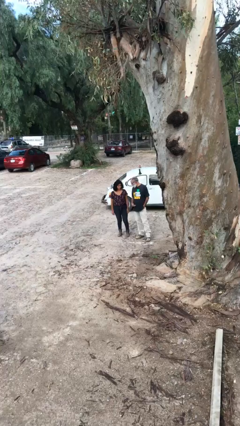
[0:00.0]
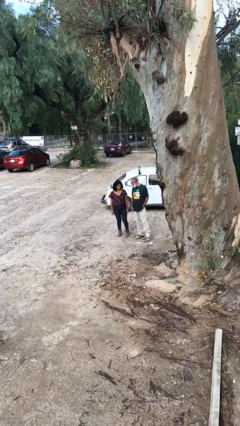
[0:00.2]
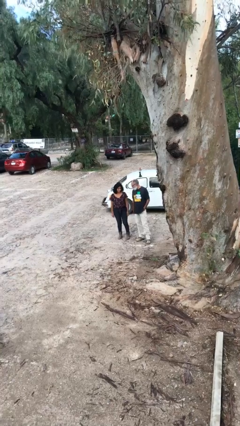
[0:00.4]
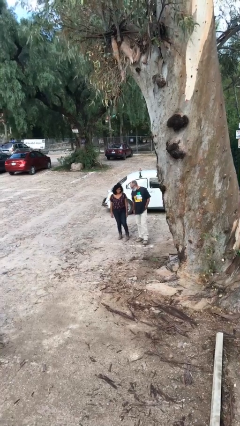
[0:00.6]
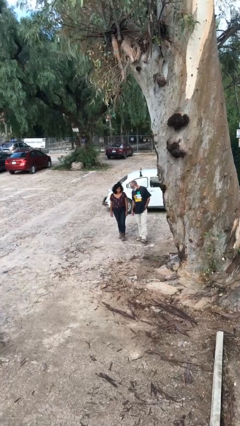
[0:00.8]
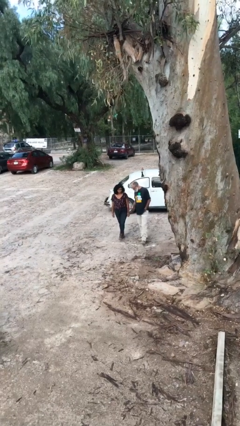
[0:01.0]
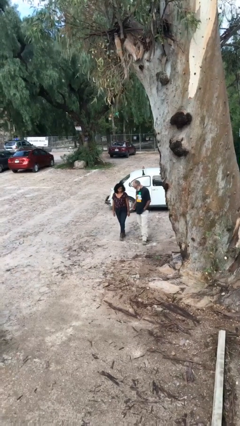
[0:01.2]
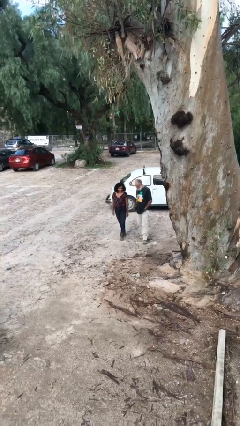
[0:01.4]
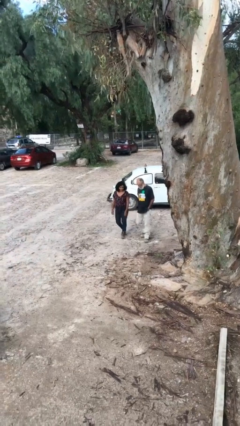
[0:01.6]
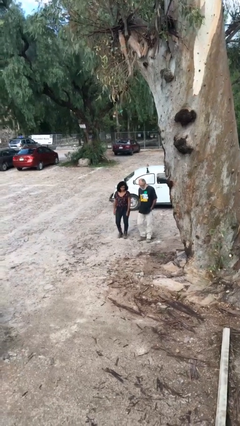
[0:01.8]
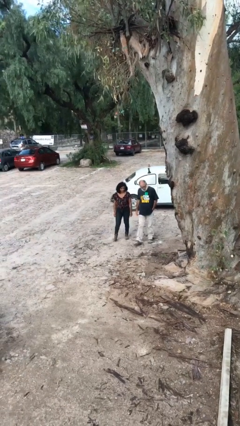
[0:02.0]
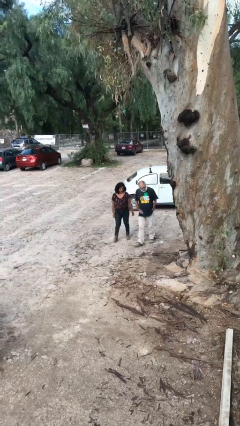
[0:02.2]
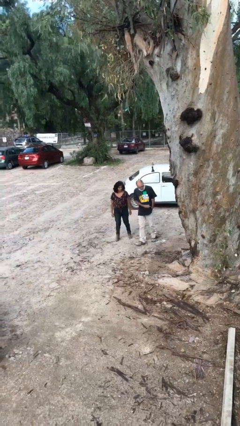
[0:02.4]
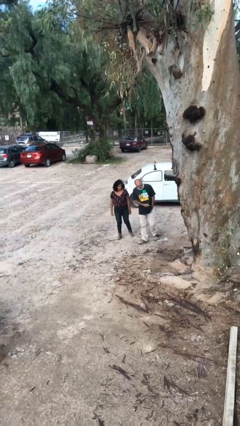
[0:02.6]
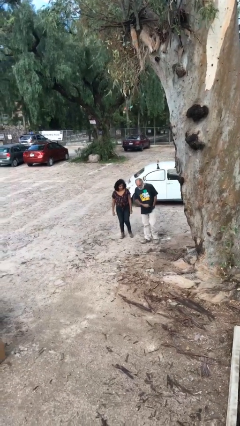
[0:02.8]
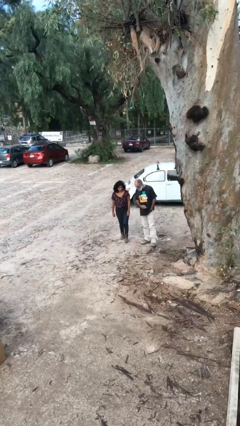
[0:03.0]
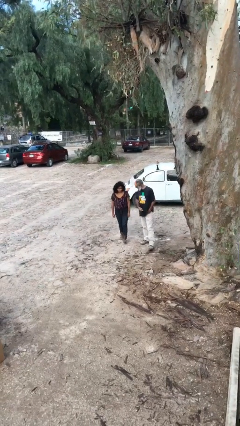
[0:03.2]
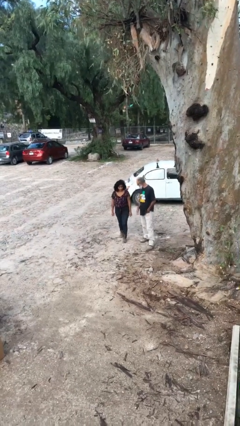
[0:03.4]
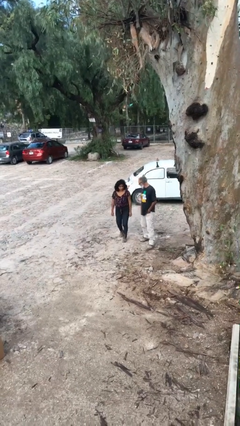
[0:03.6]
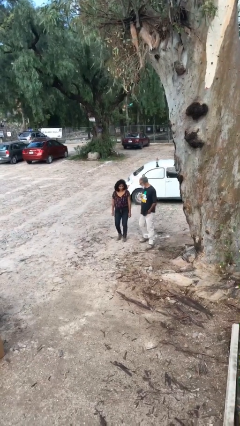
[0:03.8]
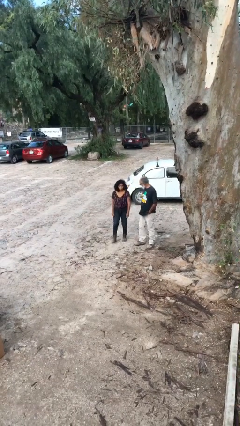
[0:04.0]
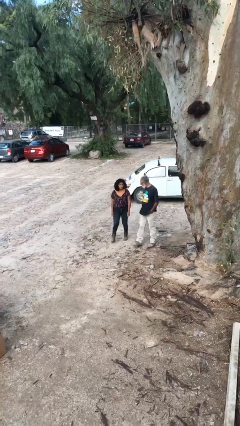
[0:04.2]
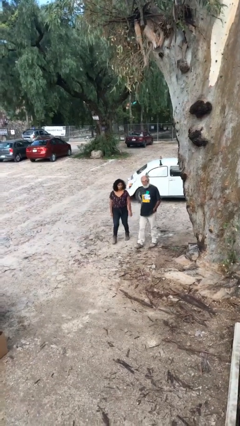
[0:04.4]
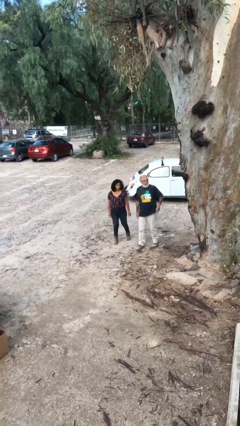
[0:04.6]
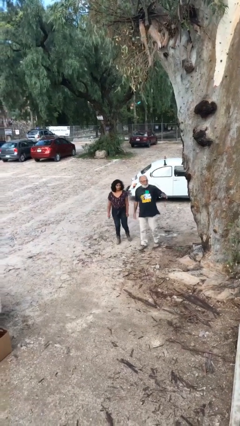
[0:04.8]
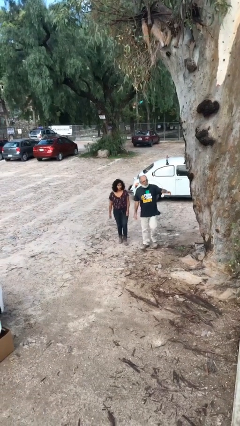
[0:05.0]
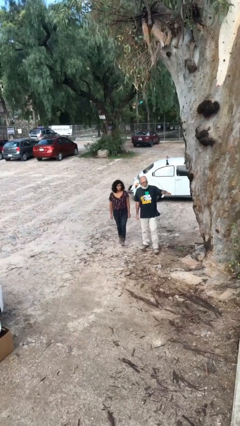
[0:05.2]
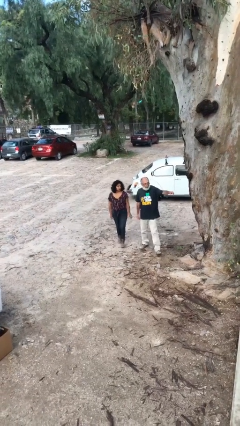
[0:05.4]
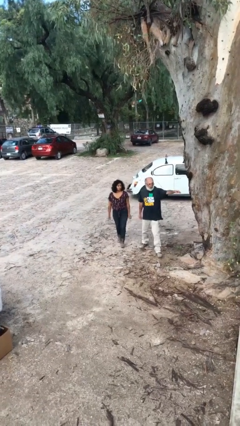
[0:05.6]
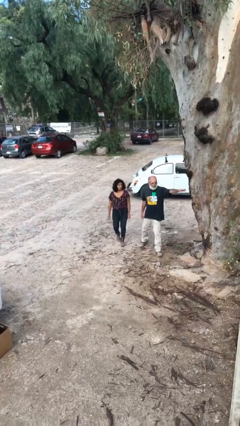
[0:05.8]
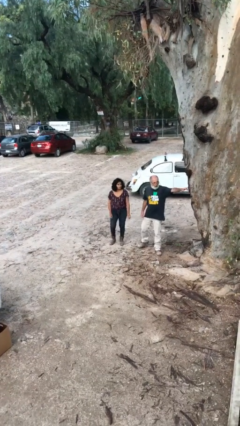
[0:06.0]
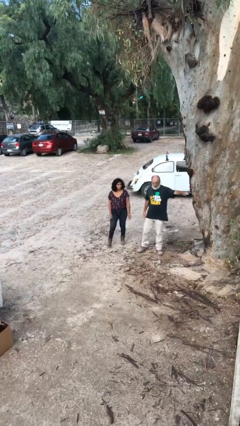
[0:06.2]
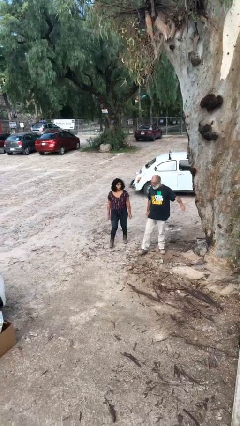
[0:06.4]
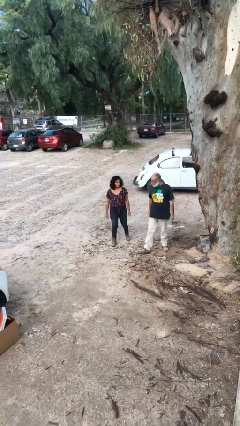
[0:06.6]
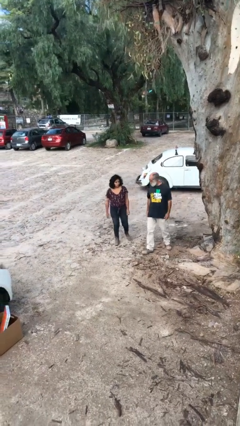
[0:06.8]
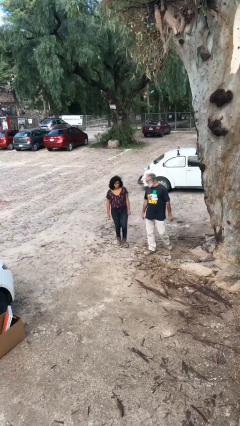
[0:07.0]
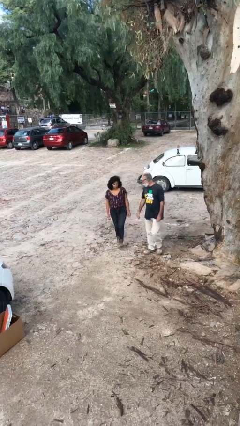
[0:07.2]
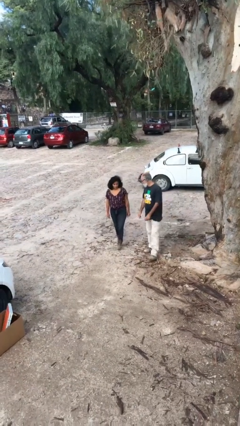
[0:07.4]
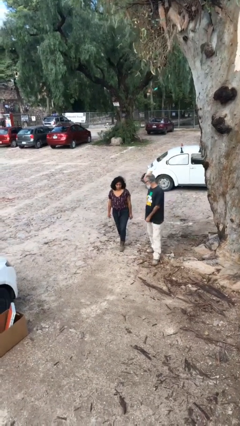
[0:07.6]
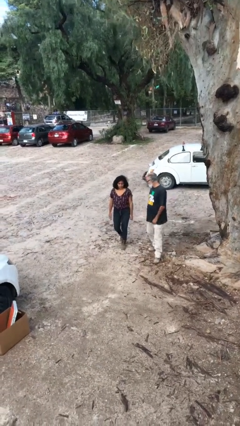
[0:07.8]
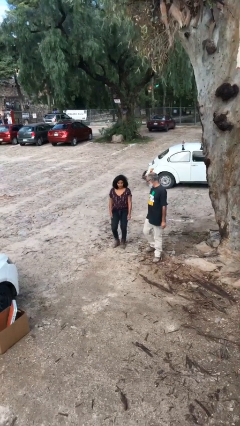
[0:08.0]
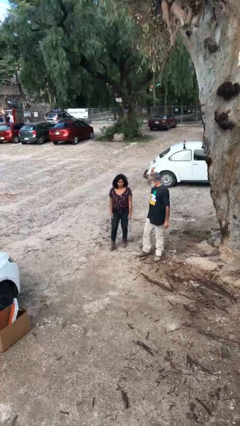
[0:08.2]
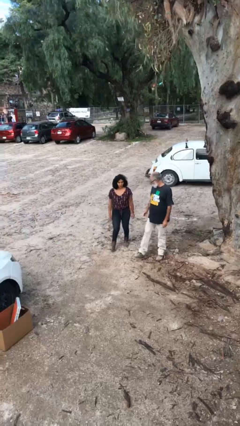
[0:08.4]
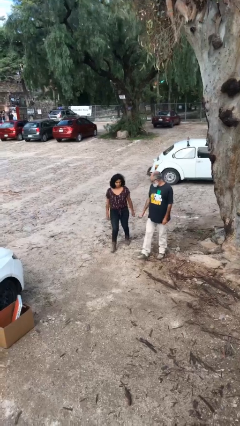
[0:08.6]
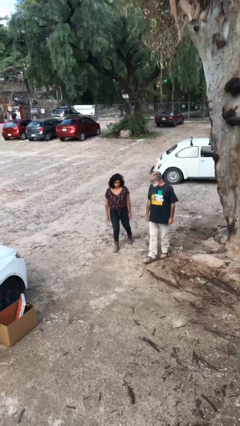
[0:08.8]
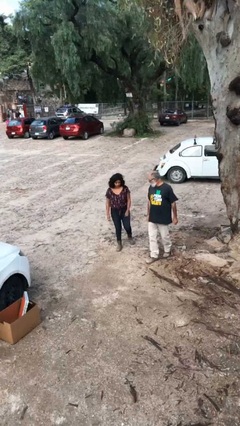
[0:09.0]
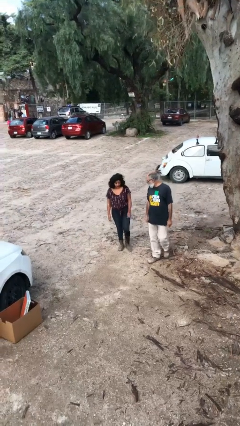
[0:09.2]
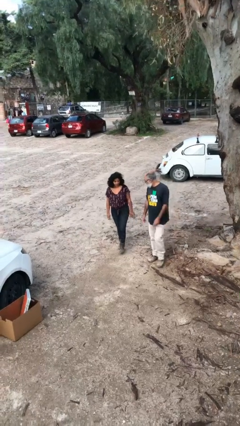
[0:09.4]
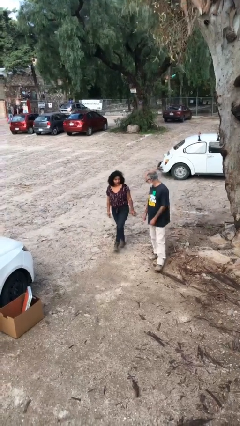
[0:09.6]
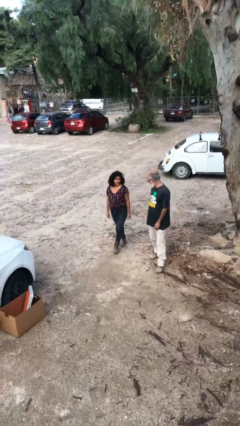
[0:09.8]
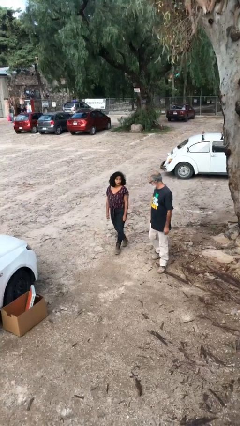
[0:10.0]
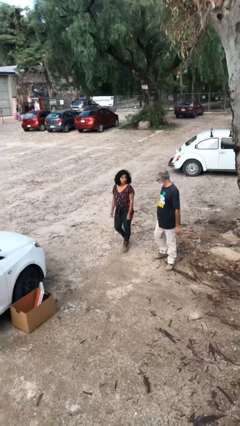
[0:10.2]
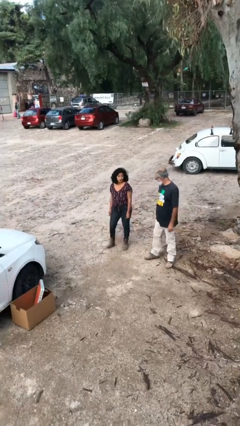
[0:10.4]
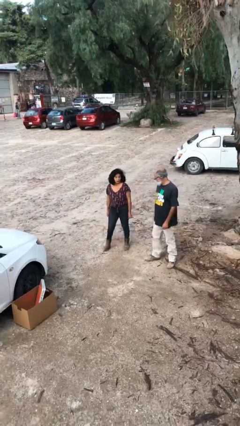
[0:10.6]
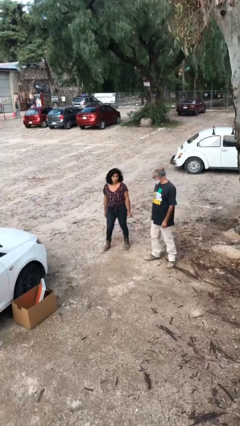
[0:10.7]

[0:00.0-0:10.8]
person talks to person

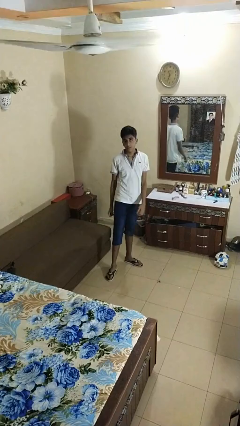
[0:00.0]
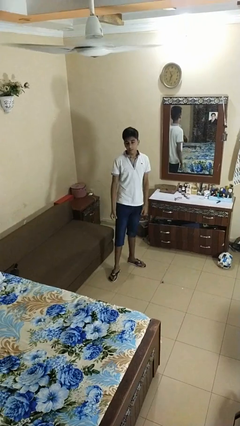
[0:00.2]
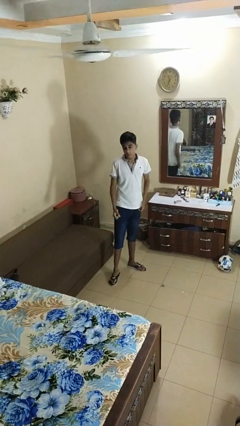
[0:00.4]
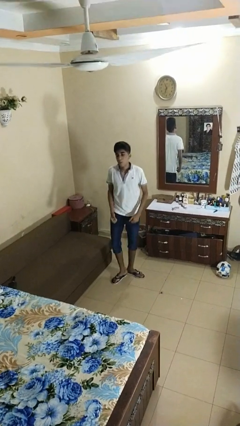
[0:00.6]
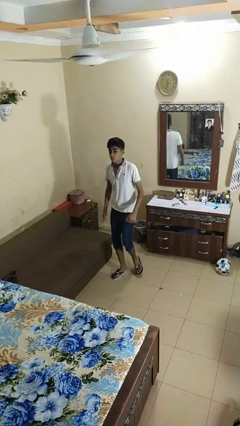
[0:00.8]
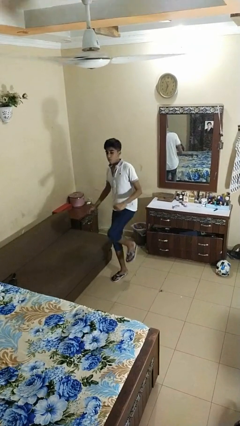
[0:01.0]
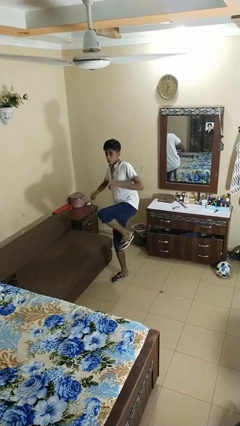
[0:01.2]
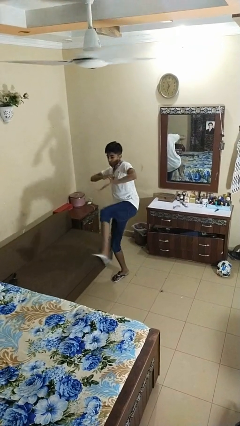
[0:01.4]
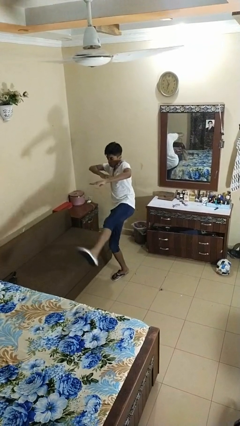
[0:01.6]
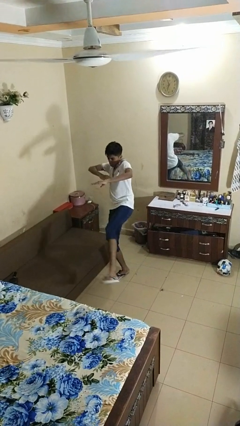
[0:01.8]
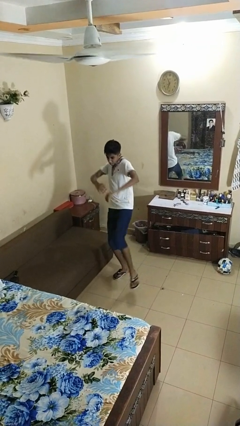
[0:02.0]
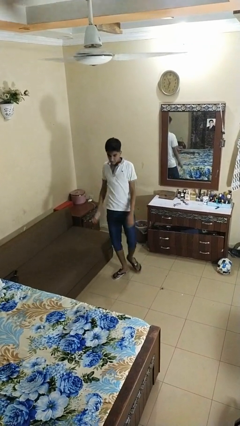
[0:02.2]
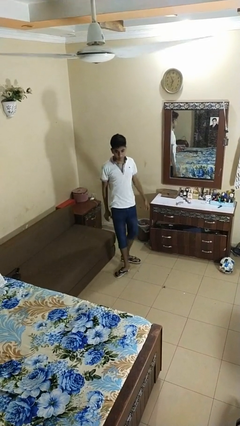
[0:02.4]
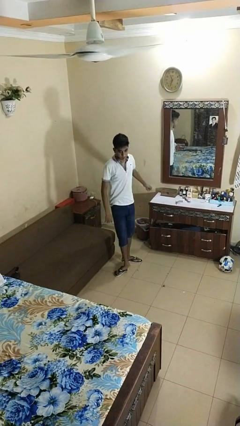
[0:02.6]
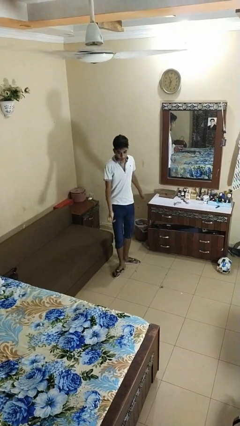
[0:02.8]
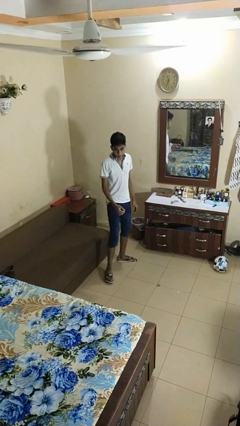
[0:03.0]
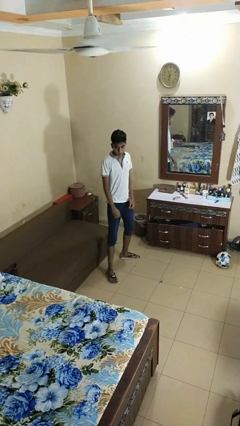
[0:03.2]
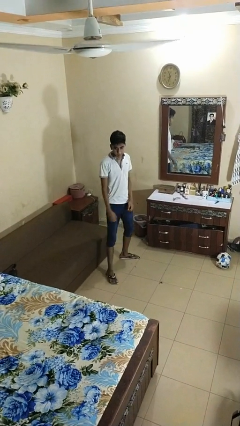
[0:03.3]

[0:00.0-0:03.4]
person karate kicks

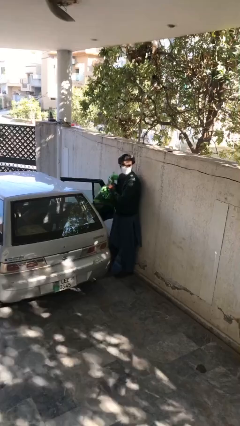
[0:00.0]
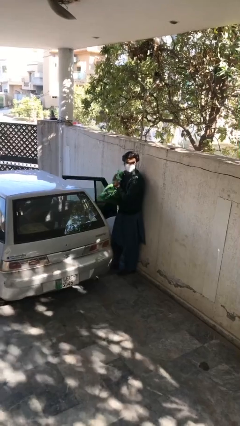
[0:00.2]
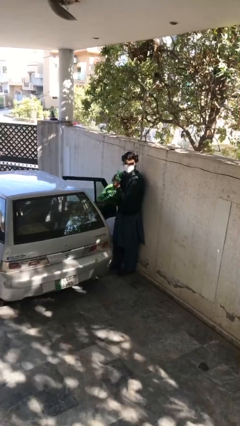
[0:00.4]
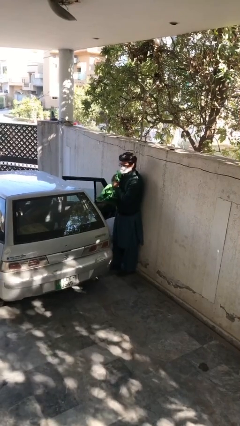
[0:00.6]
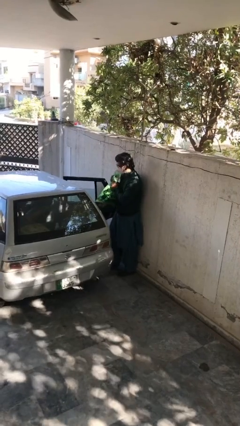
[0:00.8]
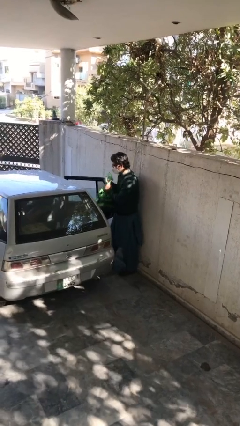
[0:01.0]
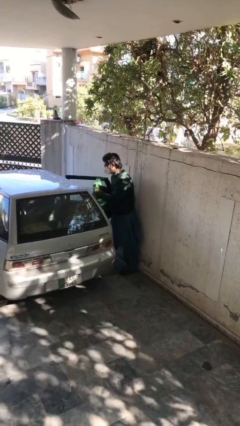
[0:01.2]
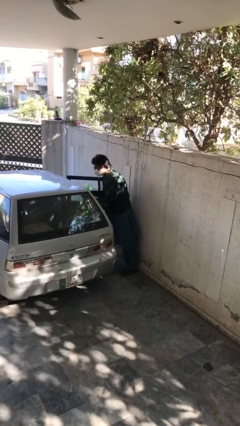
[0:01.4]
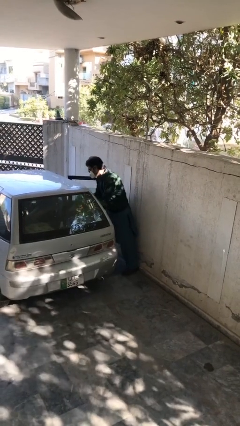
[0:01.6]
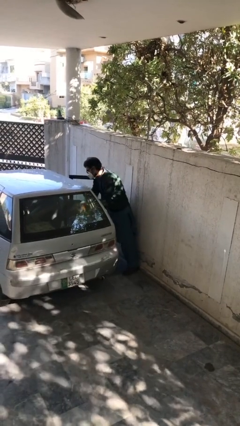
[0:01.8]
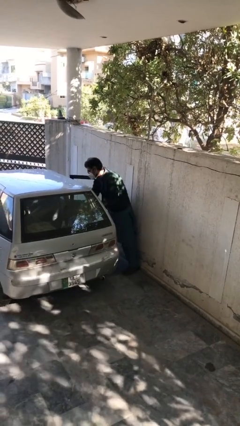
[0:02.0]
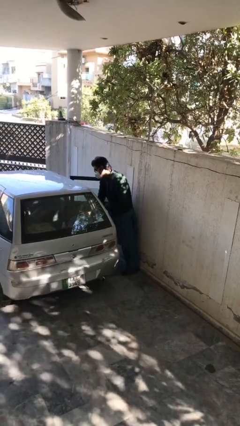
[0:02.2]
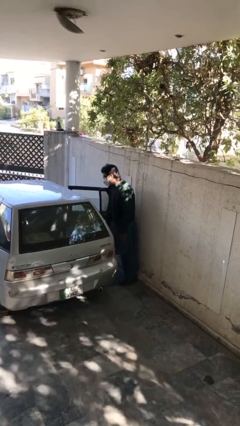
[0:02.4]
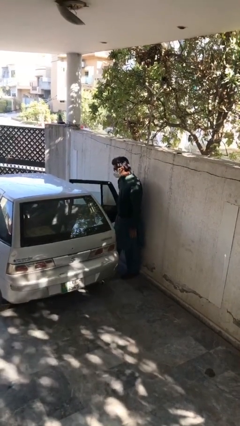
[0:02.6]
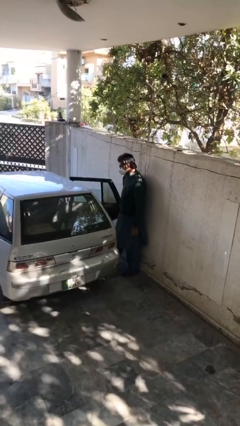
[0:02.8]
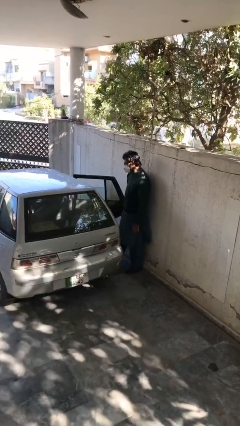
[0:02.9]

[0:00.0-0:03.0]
person loads car

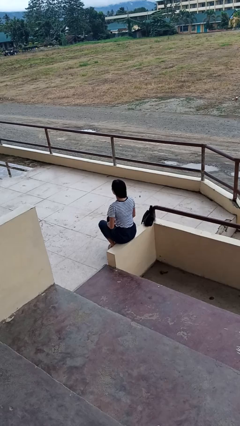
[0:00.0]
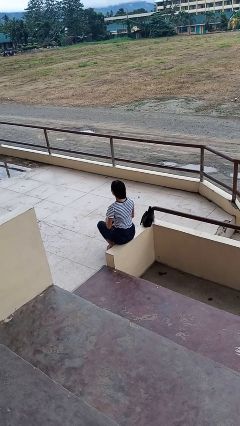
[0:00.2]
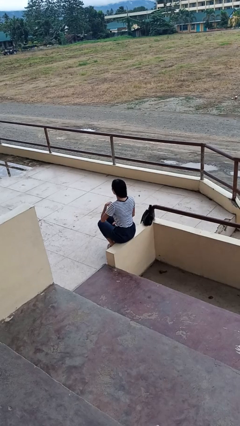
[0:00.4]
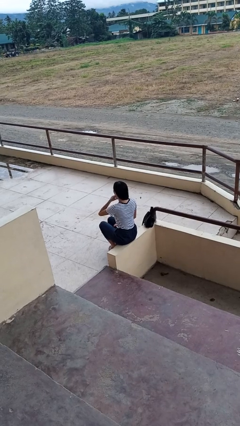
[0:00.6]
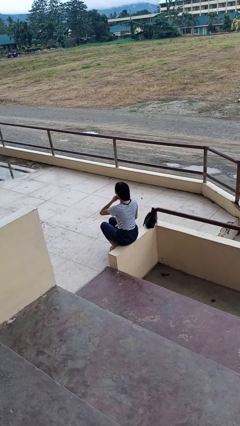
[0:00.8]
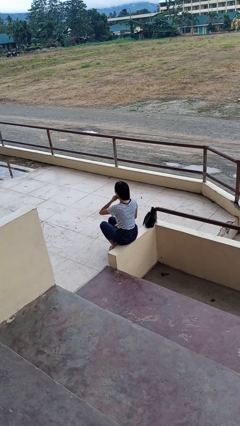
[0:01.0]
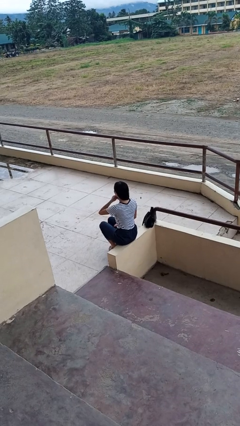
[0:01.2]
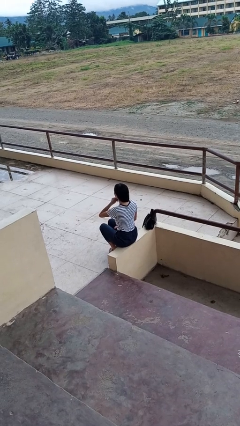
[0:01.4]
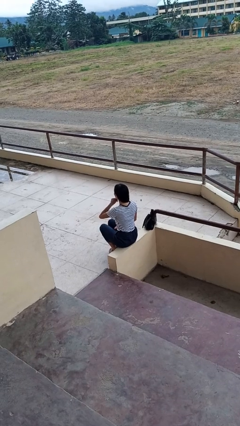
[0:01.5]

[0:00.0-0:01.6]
person strokes chin
